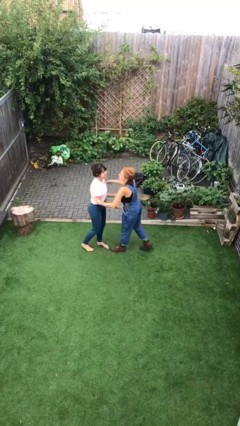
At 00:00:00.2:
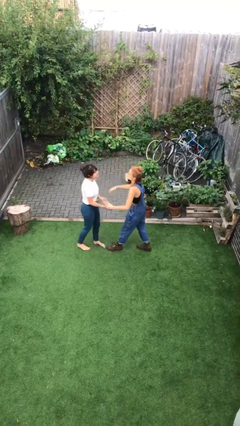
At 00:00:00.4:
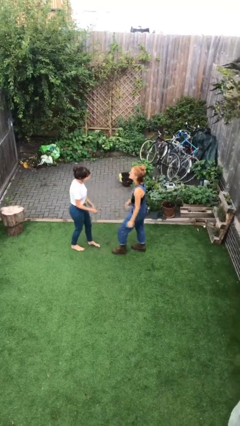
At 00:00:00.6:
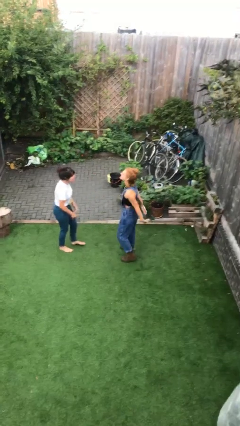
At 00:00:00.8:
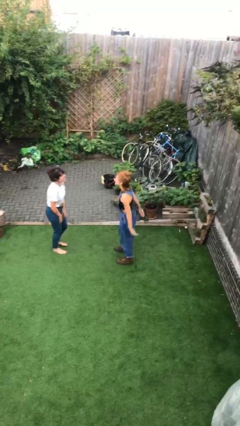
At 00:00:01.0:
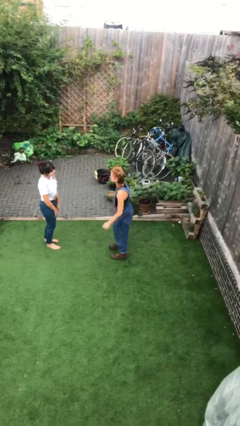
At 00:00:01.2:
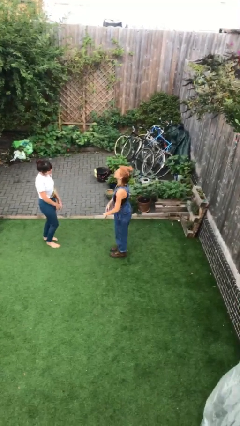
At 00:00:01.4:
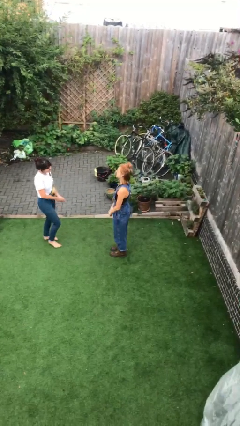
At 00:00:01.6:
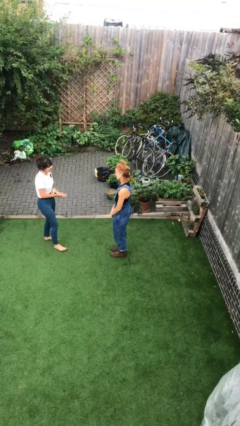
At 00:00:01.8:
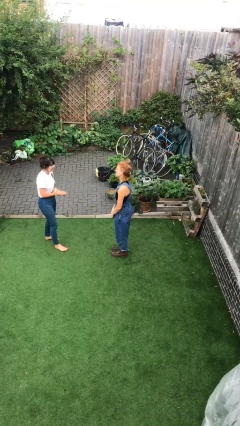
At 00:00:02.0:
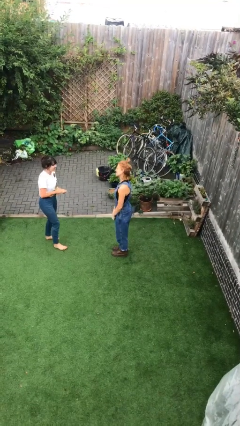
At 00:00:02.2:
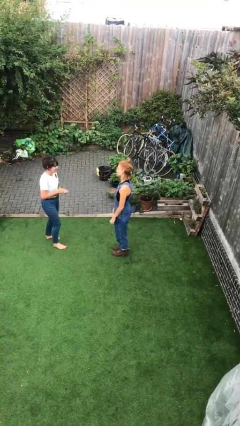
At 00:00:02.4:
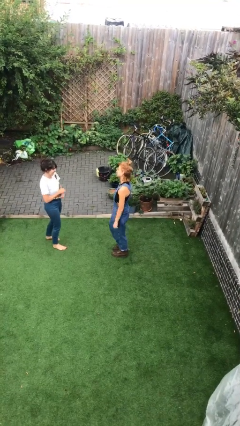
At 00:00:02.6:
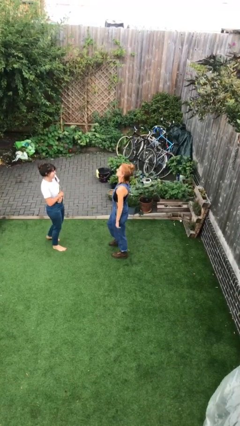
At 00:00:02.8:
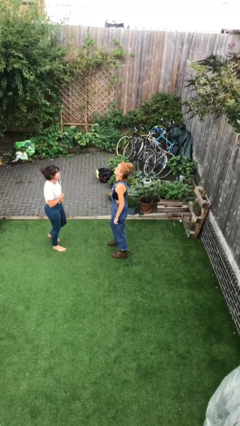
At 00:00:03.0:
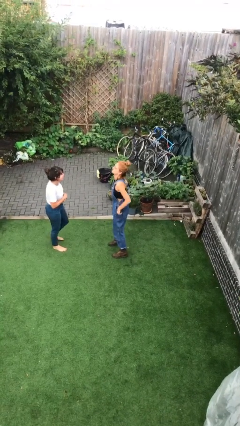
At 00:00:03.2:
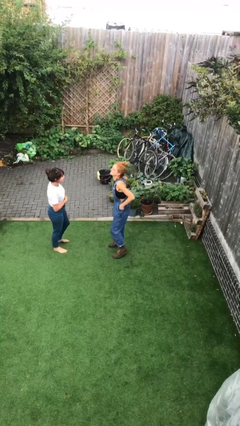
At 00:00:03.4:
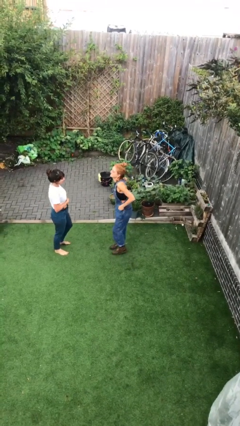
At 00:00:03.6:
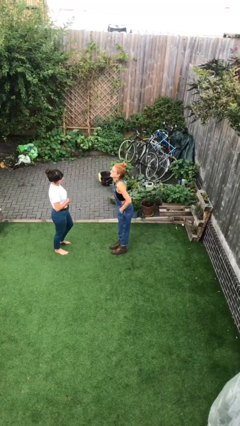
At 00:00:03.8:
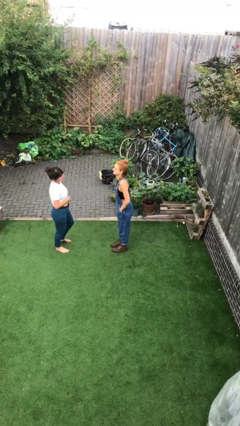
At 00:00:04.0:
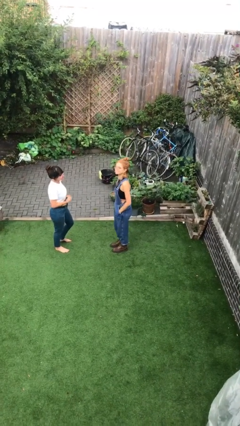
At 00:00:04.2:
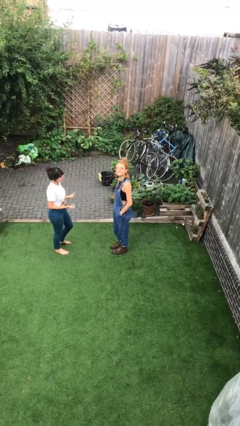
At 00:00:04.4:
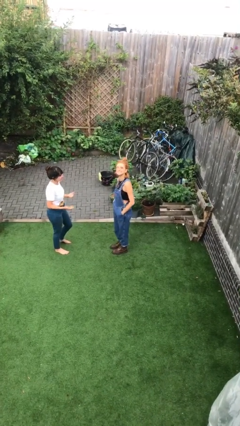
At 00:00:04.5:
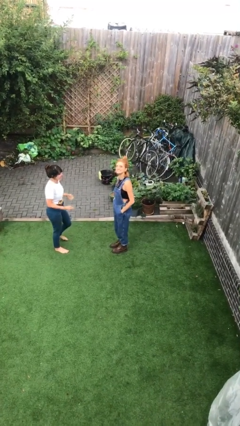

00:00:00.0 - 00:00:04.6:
person talks to person

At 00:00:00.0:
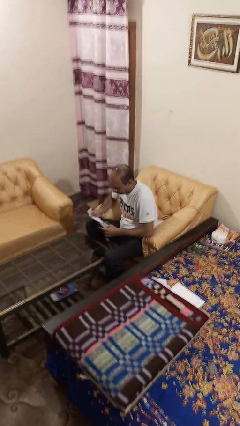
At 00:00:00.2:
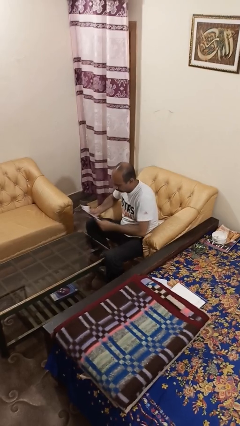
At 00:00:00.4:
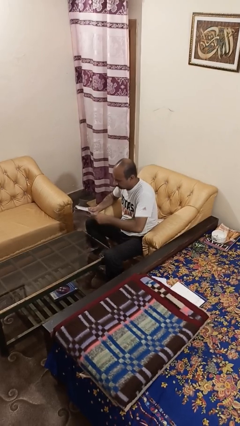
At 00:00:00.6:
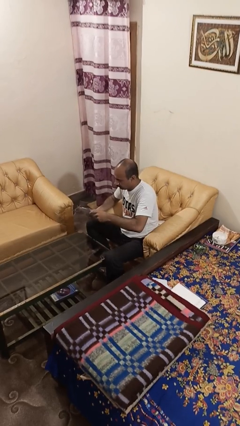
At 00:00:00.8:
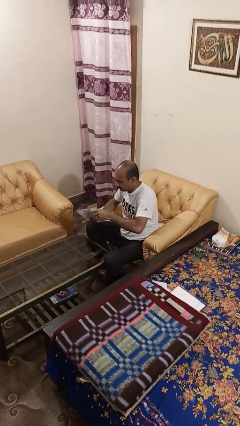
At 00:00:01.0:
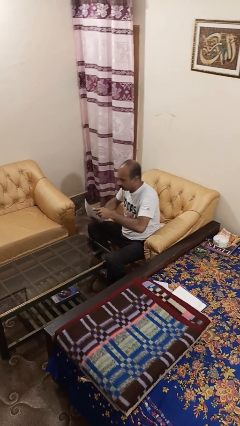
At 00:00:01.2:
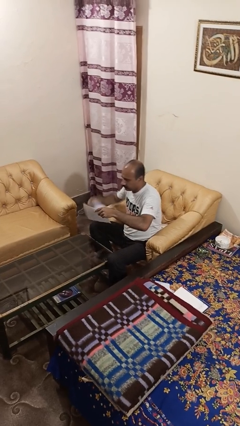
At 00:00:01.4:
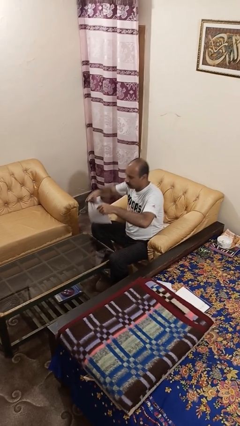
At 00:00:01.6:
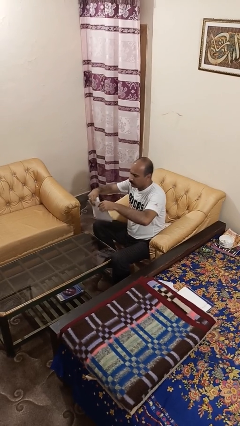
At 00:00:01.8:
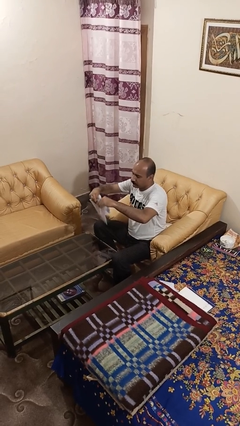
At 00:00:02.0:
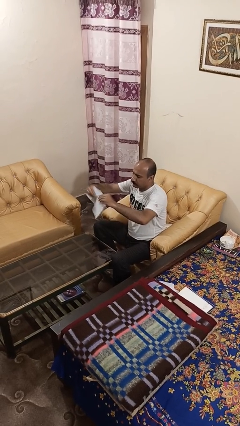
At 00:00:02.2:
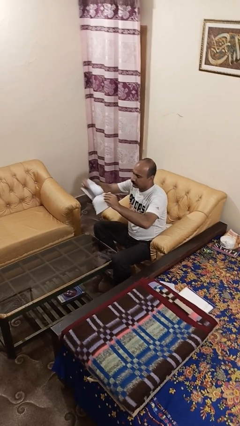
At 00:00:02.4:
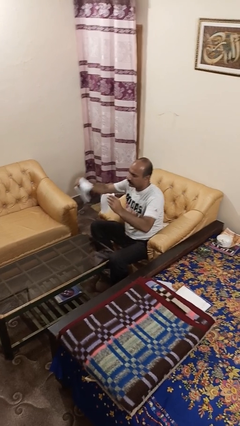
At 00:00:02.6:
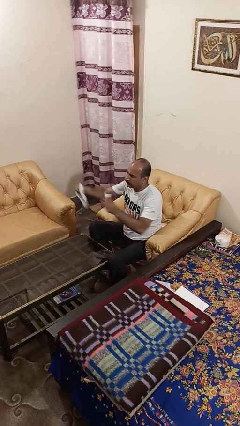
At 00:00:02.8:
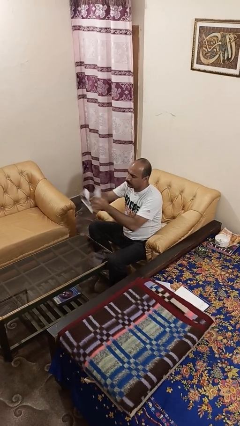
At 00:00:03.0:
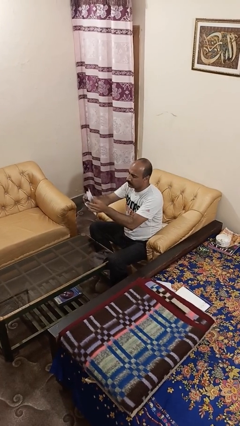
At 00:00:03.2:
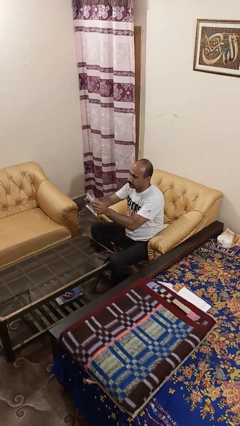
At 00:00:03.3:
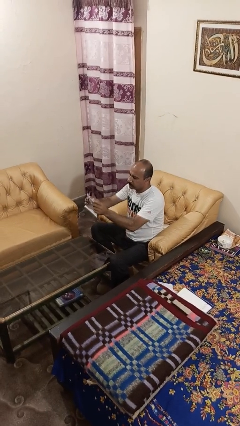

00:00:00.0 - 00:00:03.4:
person tears paper

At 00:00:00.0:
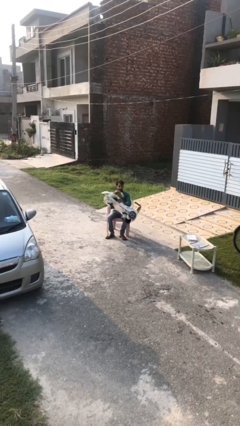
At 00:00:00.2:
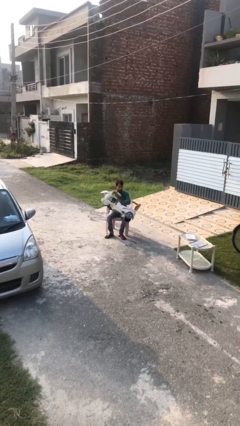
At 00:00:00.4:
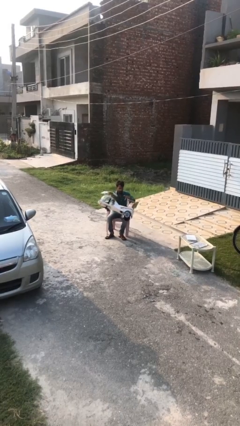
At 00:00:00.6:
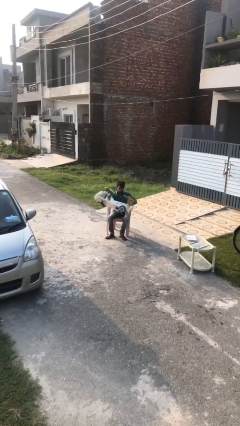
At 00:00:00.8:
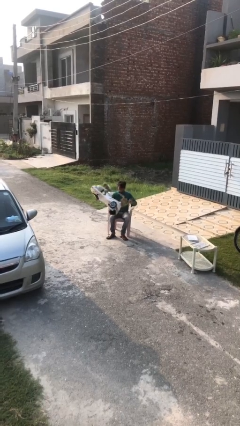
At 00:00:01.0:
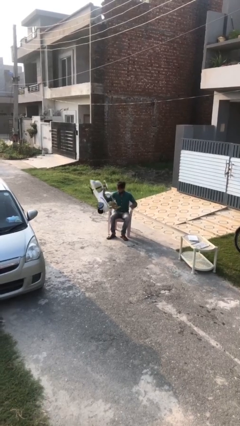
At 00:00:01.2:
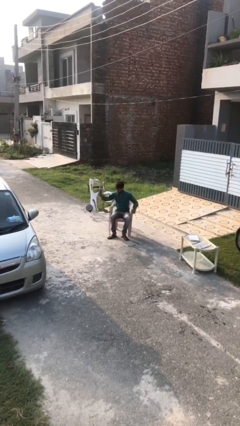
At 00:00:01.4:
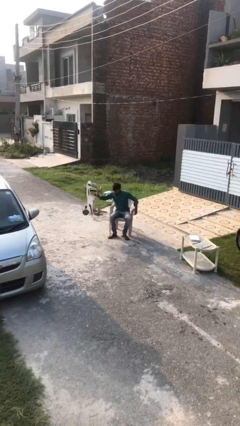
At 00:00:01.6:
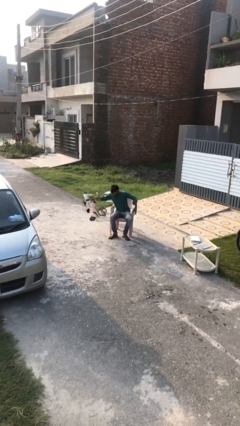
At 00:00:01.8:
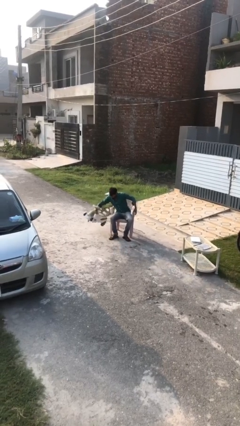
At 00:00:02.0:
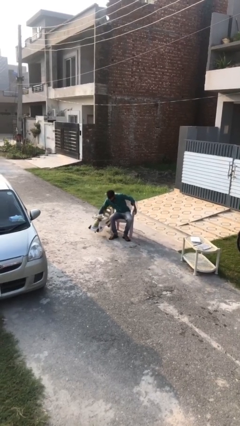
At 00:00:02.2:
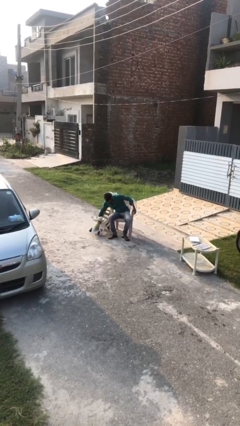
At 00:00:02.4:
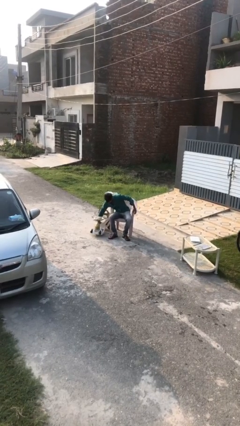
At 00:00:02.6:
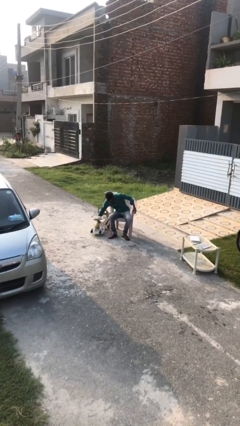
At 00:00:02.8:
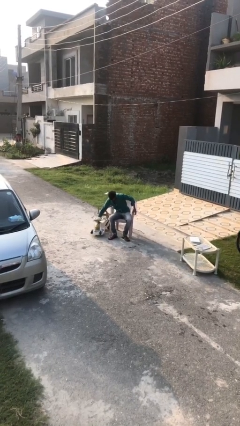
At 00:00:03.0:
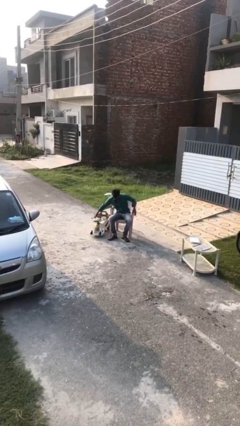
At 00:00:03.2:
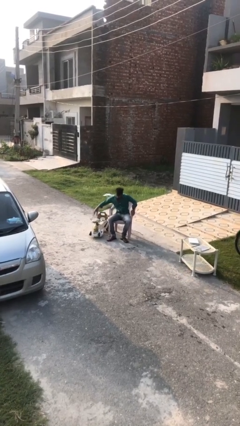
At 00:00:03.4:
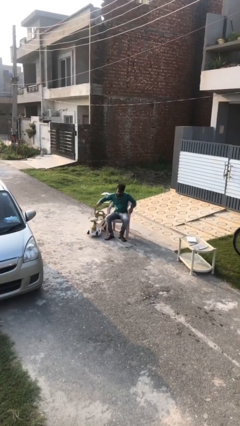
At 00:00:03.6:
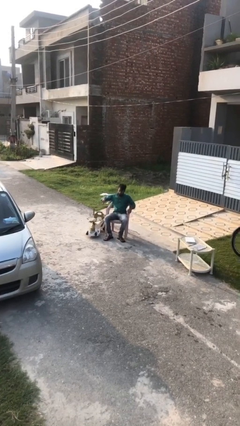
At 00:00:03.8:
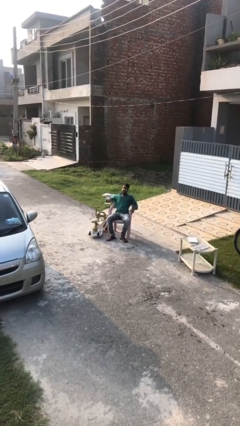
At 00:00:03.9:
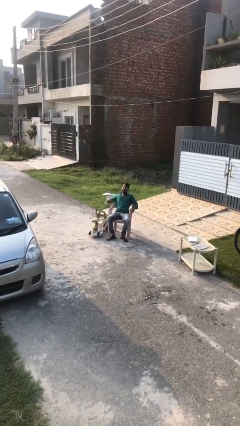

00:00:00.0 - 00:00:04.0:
person puts down object on floor

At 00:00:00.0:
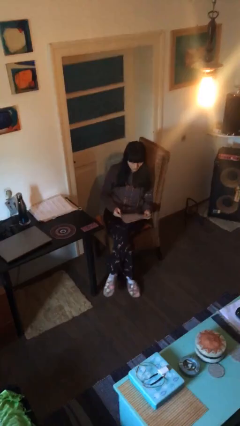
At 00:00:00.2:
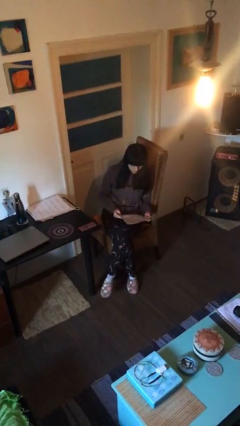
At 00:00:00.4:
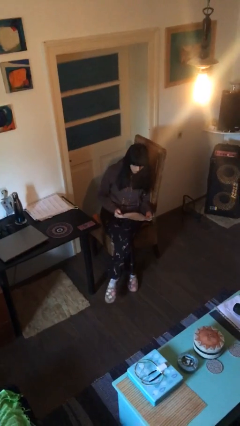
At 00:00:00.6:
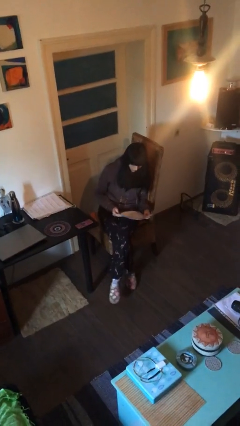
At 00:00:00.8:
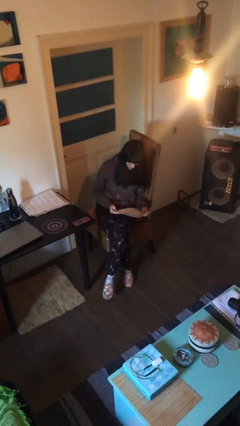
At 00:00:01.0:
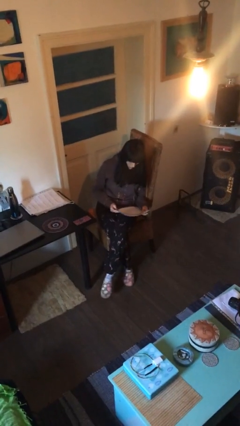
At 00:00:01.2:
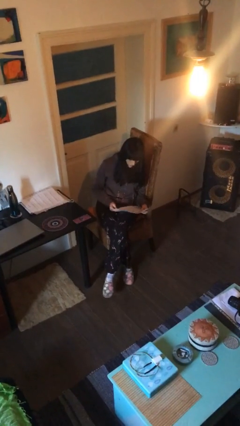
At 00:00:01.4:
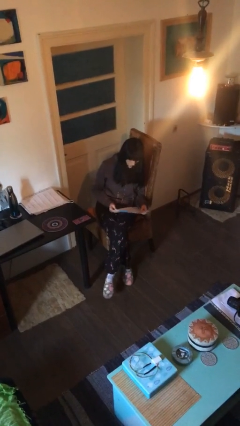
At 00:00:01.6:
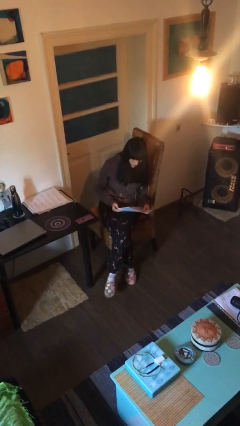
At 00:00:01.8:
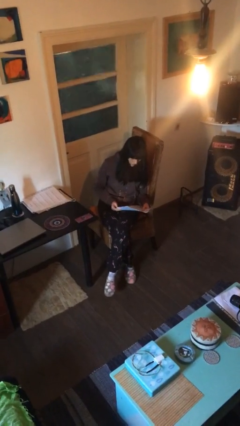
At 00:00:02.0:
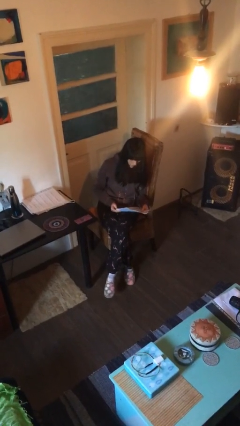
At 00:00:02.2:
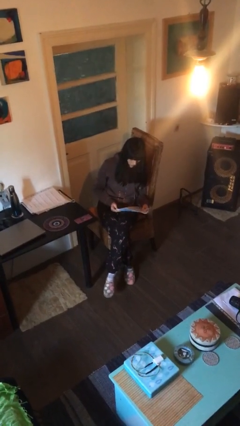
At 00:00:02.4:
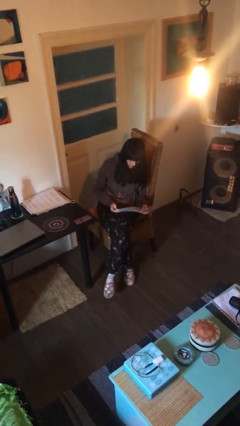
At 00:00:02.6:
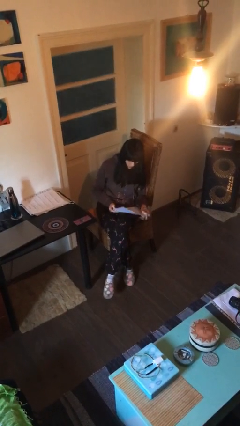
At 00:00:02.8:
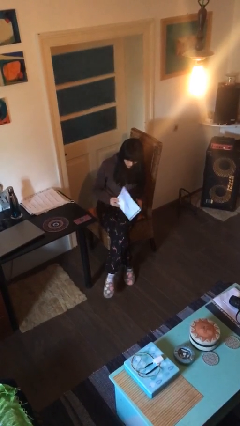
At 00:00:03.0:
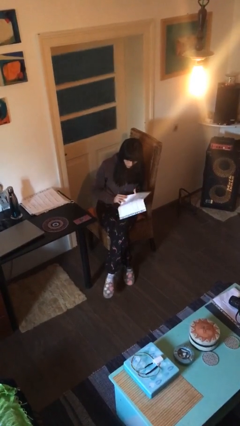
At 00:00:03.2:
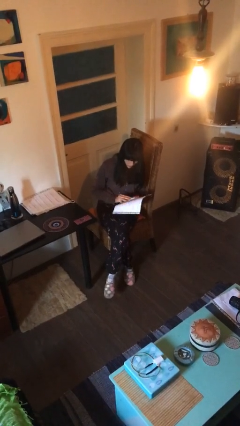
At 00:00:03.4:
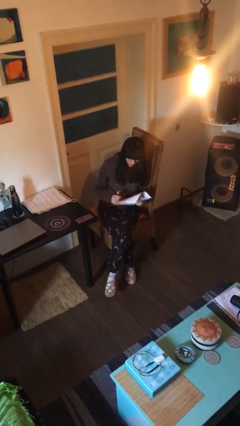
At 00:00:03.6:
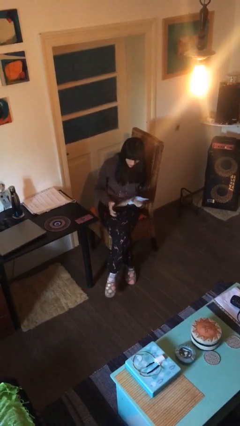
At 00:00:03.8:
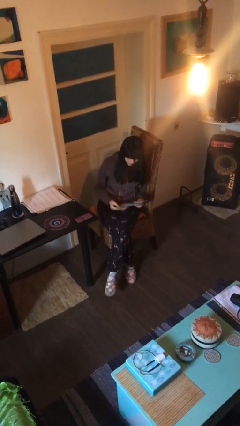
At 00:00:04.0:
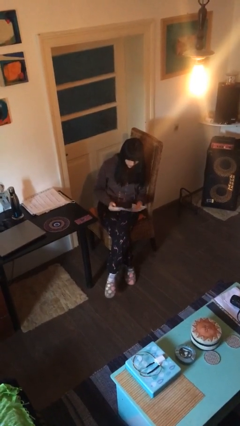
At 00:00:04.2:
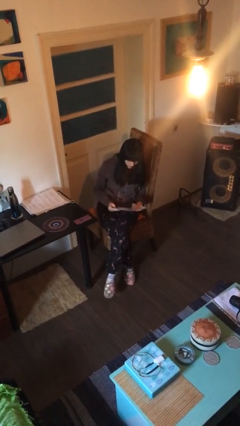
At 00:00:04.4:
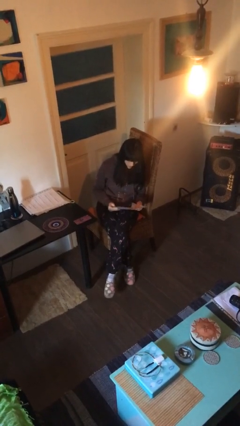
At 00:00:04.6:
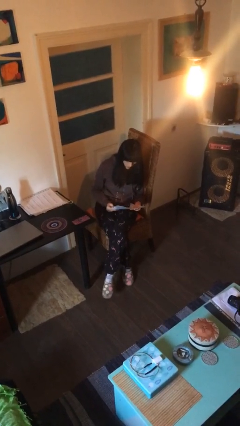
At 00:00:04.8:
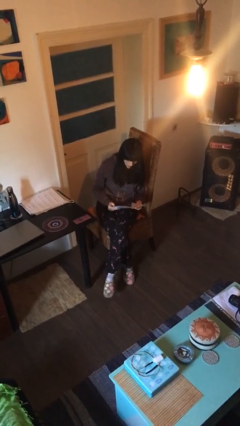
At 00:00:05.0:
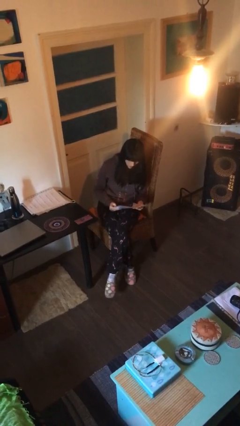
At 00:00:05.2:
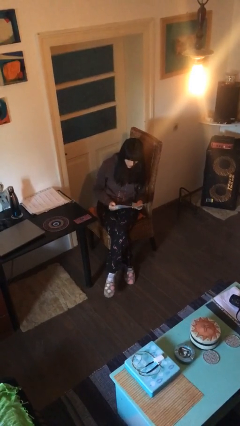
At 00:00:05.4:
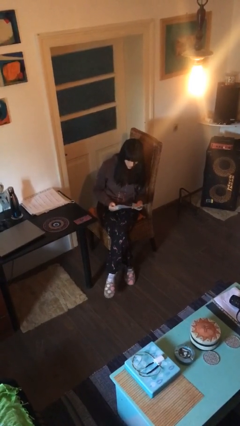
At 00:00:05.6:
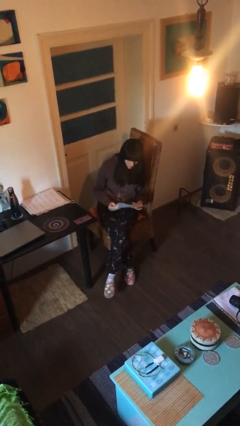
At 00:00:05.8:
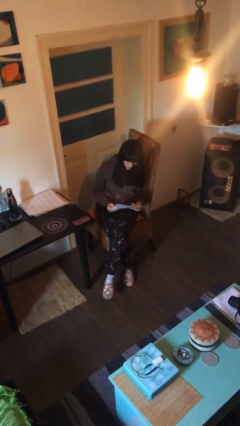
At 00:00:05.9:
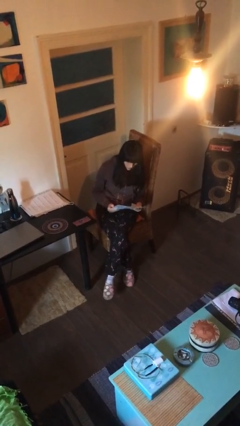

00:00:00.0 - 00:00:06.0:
person reads document
